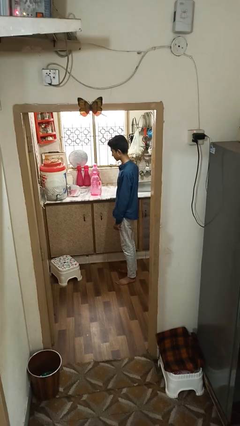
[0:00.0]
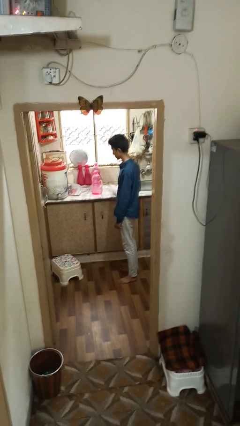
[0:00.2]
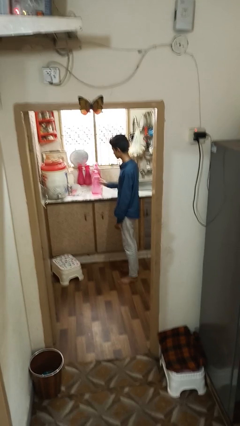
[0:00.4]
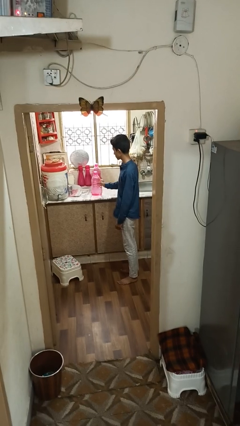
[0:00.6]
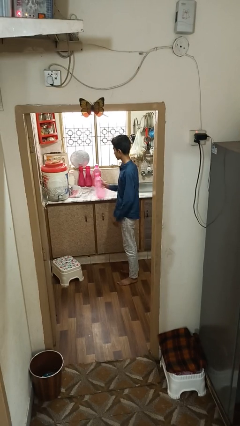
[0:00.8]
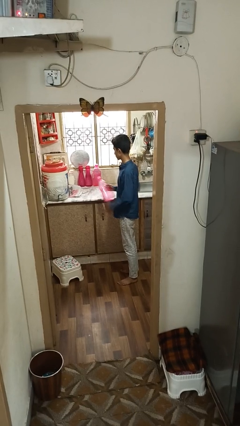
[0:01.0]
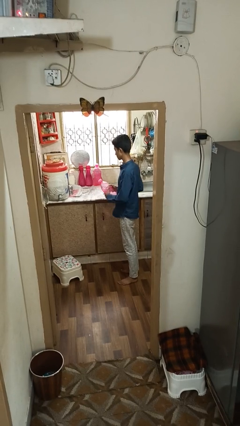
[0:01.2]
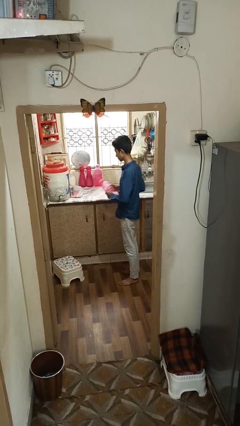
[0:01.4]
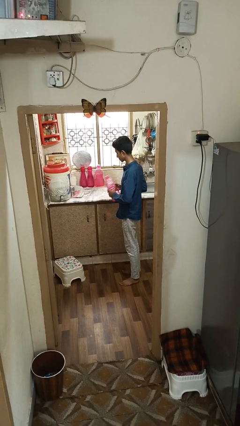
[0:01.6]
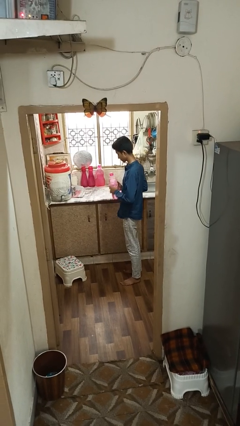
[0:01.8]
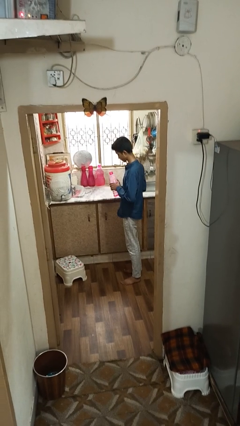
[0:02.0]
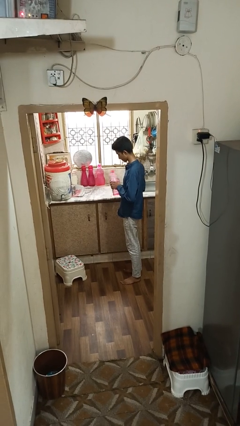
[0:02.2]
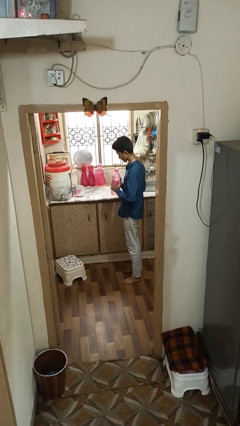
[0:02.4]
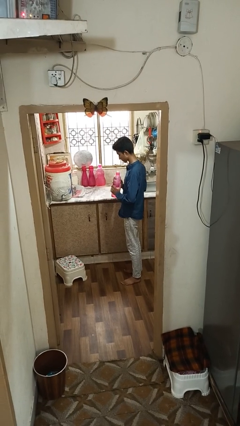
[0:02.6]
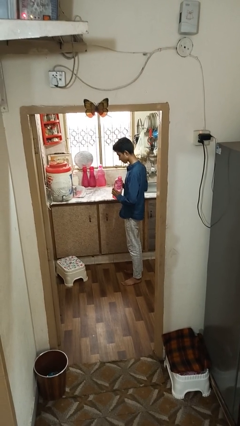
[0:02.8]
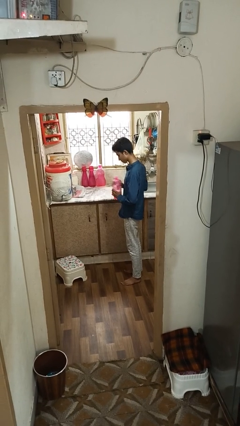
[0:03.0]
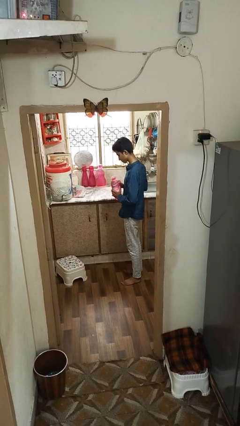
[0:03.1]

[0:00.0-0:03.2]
person picks up object from countertop

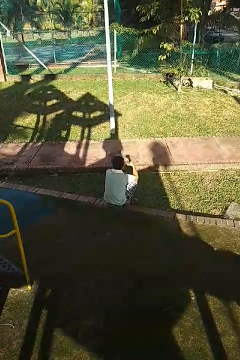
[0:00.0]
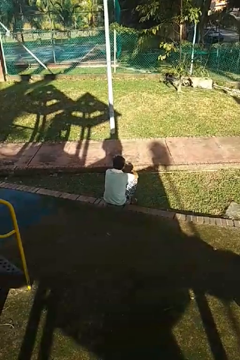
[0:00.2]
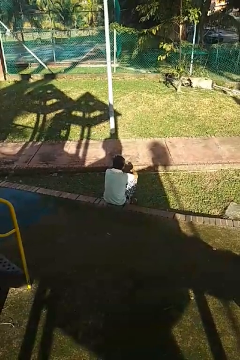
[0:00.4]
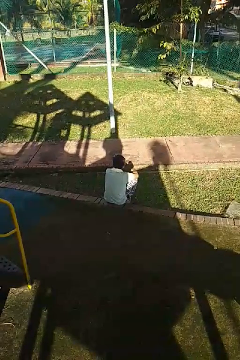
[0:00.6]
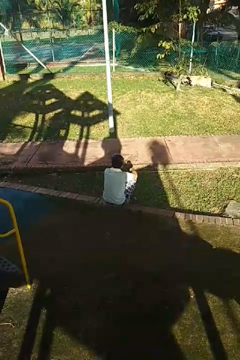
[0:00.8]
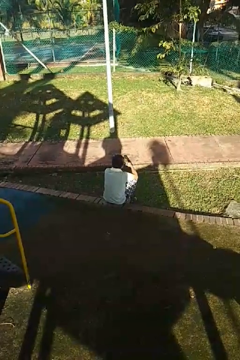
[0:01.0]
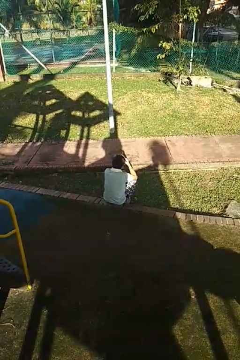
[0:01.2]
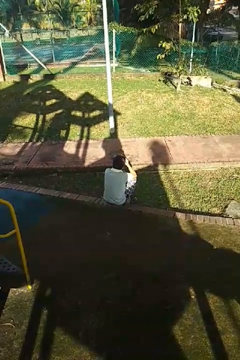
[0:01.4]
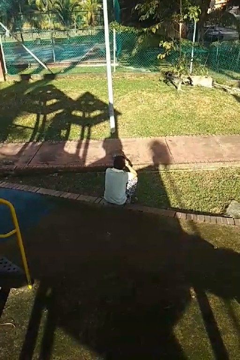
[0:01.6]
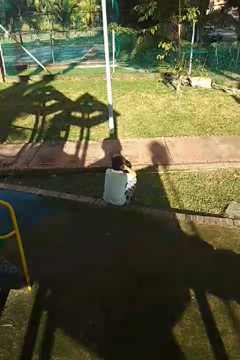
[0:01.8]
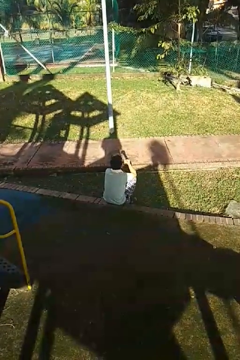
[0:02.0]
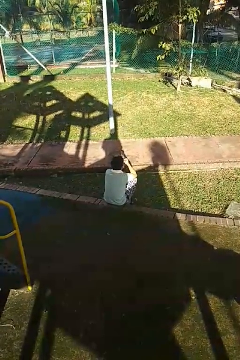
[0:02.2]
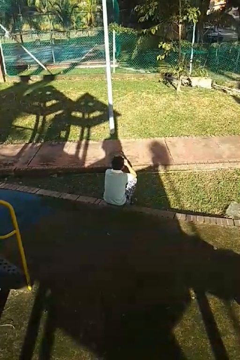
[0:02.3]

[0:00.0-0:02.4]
person strokes hair

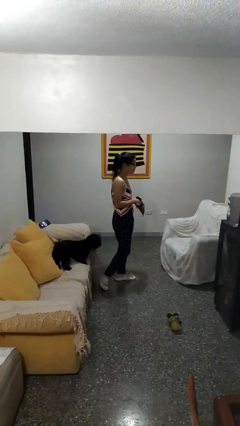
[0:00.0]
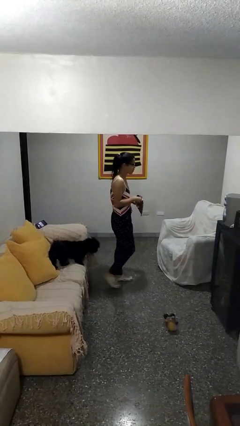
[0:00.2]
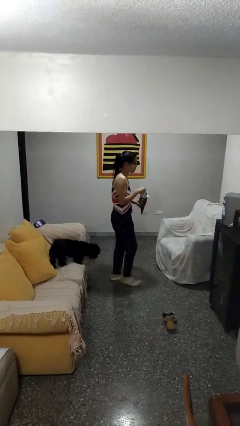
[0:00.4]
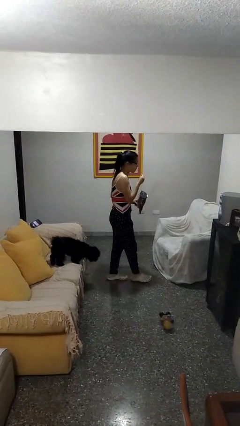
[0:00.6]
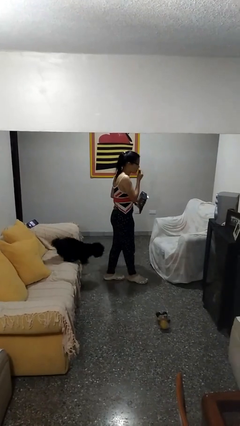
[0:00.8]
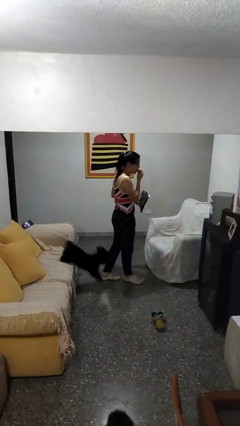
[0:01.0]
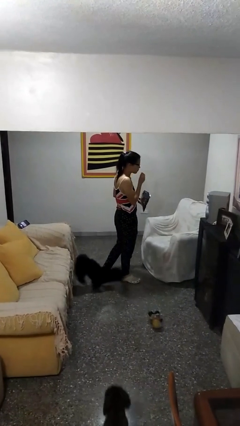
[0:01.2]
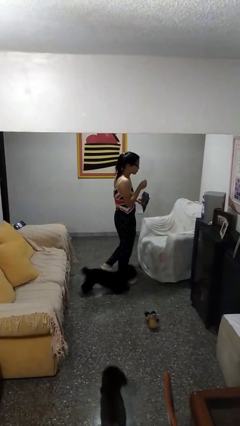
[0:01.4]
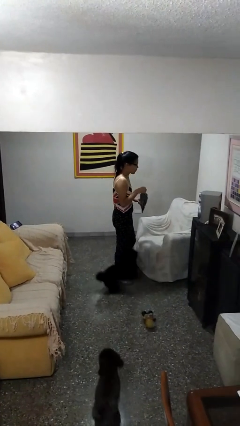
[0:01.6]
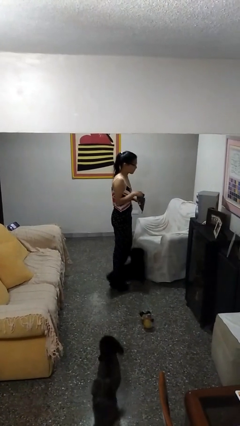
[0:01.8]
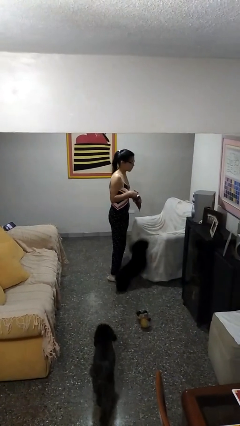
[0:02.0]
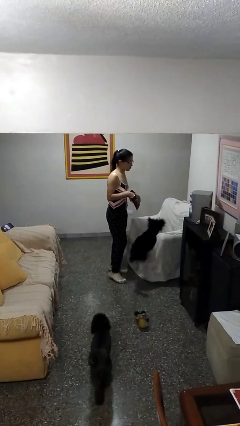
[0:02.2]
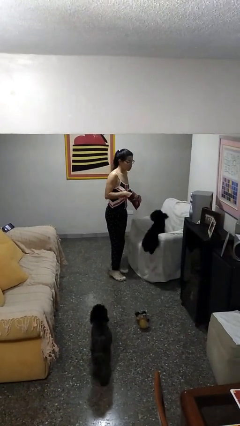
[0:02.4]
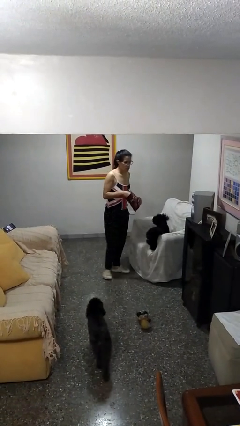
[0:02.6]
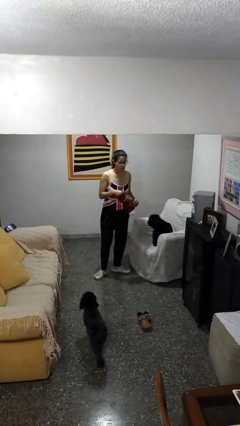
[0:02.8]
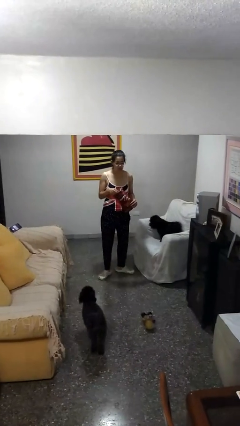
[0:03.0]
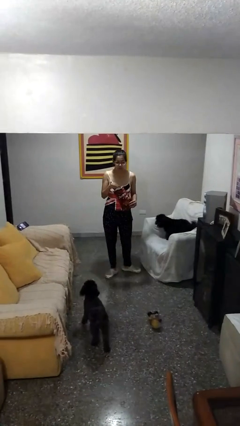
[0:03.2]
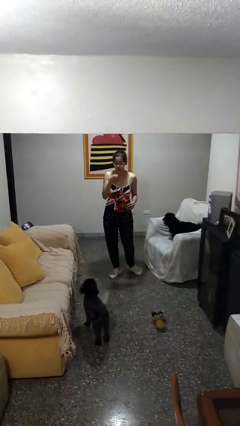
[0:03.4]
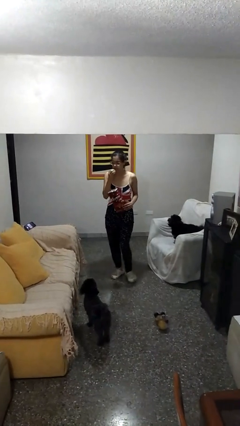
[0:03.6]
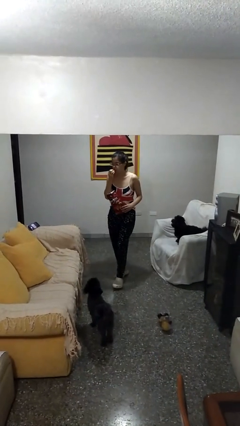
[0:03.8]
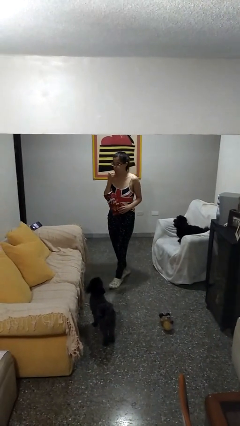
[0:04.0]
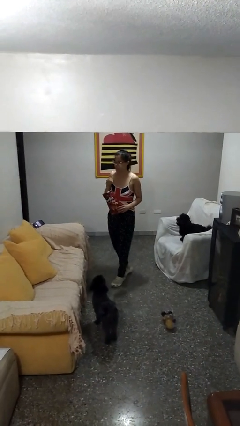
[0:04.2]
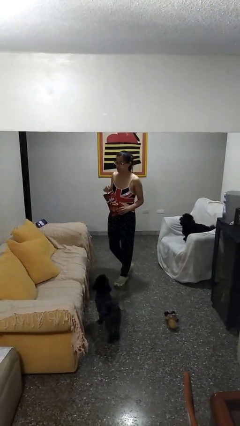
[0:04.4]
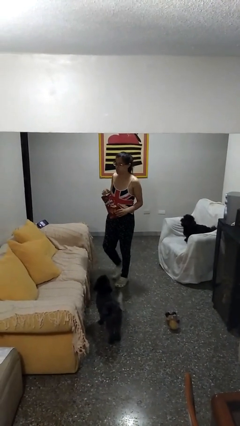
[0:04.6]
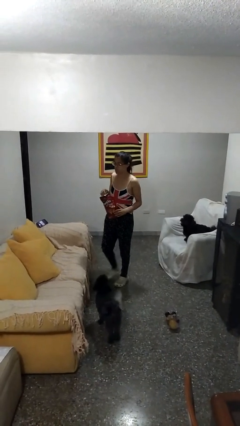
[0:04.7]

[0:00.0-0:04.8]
person eats snack from bag

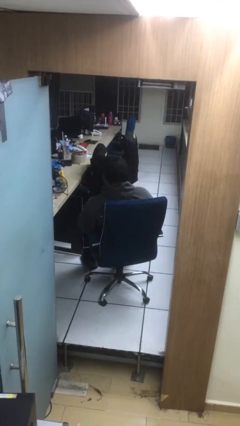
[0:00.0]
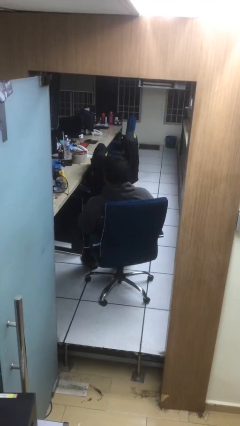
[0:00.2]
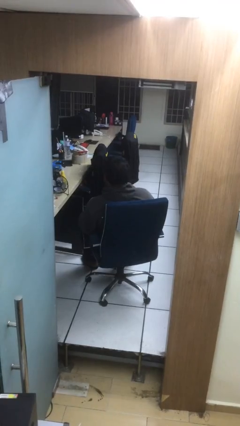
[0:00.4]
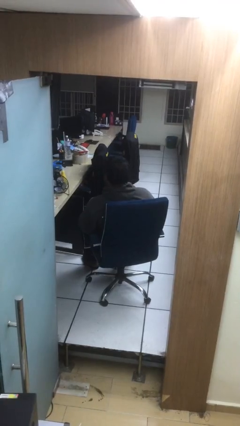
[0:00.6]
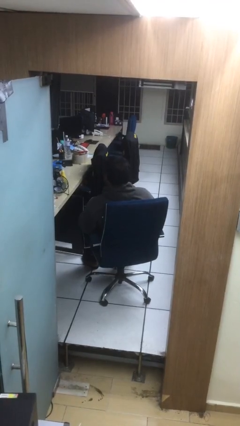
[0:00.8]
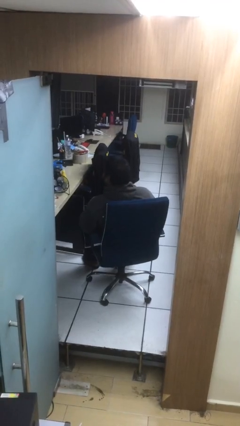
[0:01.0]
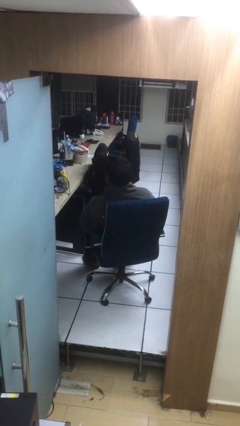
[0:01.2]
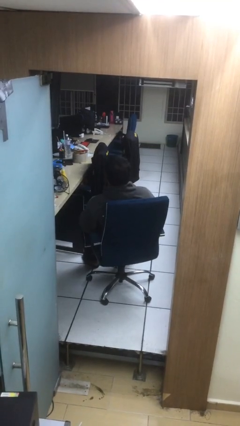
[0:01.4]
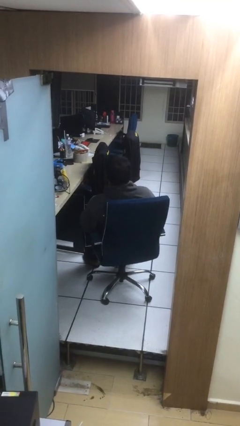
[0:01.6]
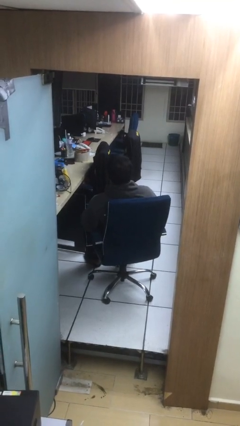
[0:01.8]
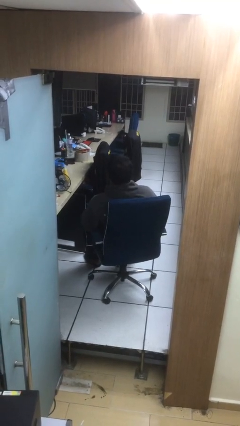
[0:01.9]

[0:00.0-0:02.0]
person shakes head

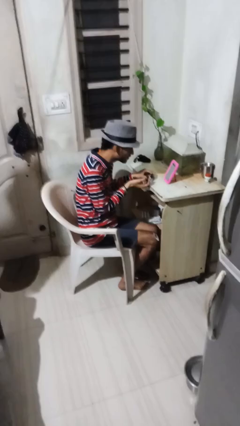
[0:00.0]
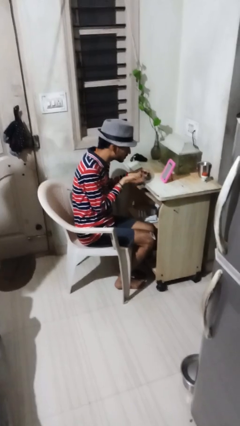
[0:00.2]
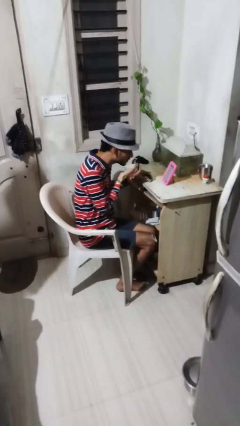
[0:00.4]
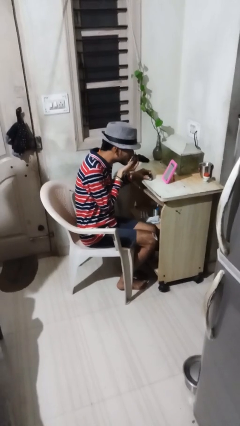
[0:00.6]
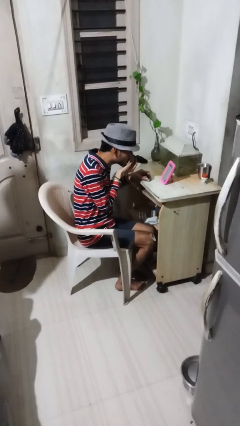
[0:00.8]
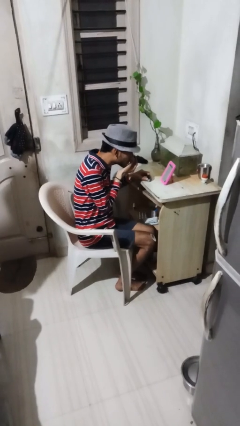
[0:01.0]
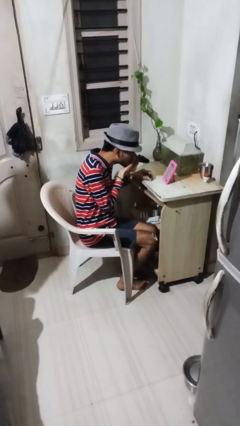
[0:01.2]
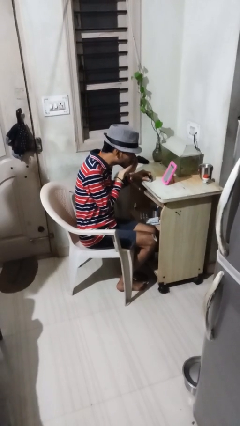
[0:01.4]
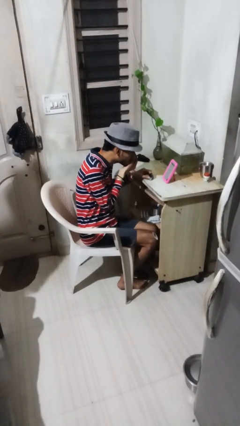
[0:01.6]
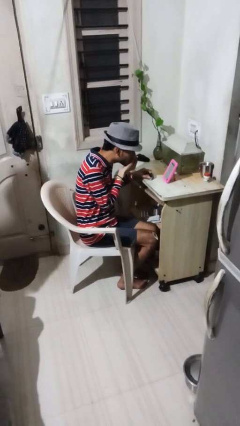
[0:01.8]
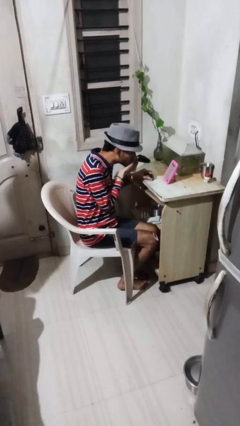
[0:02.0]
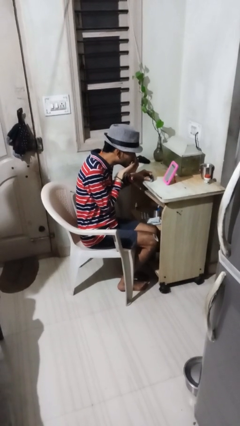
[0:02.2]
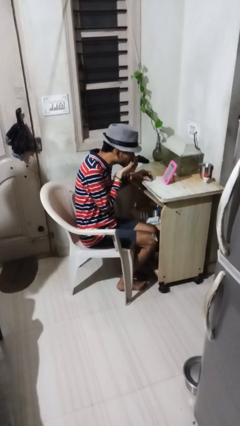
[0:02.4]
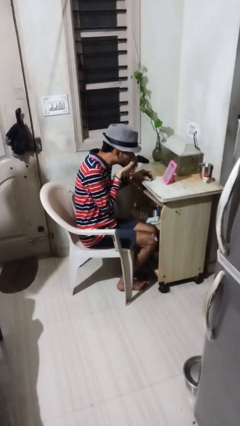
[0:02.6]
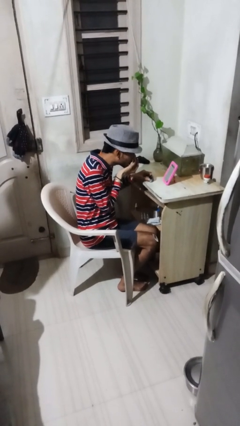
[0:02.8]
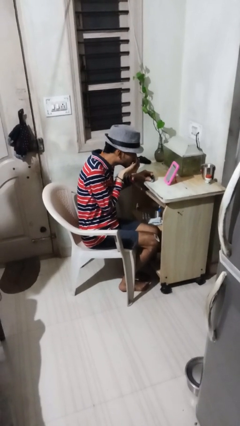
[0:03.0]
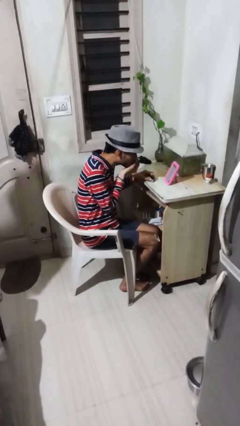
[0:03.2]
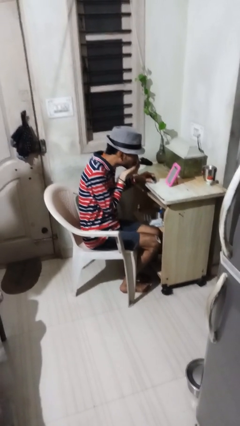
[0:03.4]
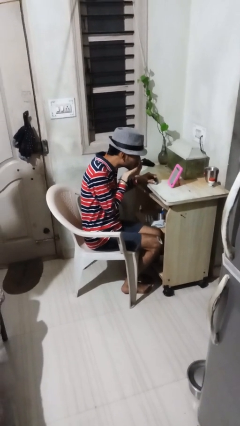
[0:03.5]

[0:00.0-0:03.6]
person applies eye makeup

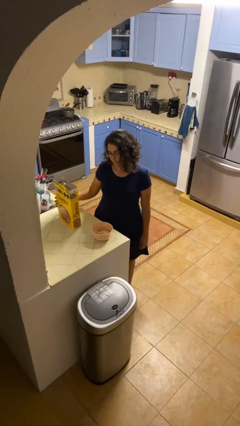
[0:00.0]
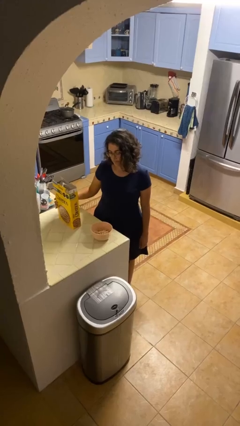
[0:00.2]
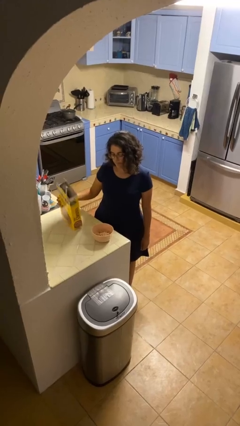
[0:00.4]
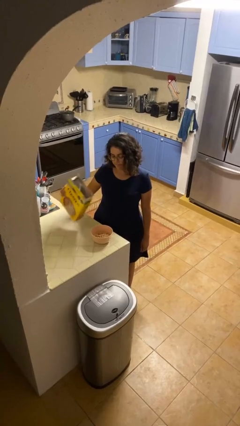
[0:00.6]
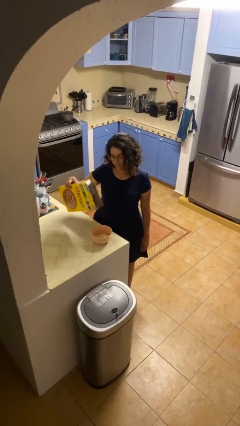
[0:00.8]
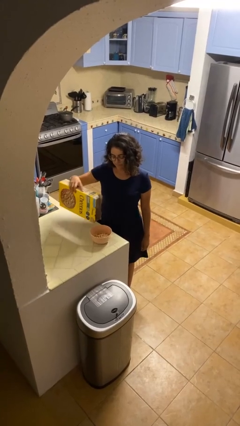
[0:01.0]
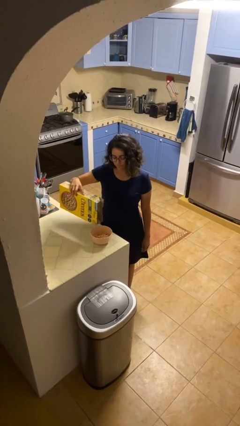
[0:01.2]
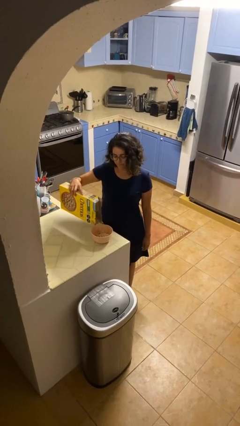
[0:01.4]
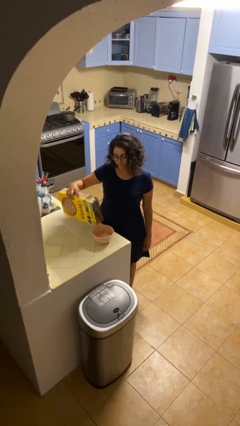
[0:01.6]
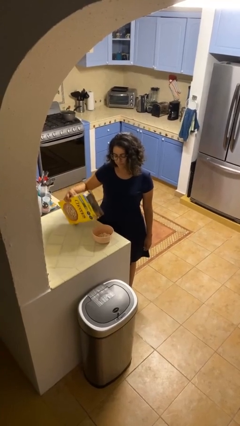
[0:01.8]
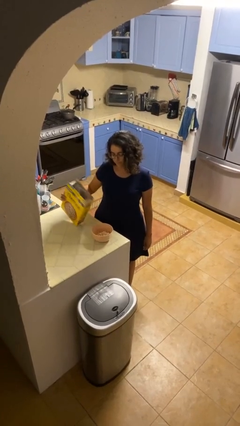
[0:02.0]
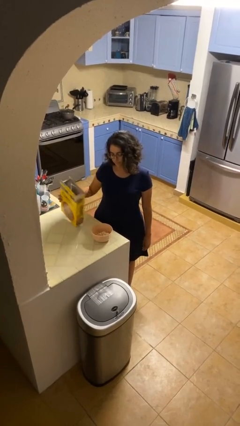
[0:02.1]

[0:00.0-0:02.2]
person pours into bowl
